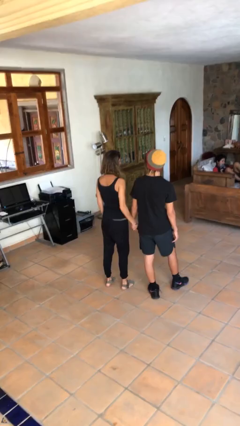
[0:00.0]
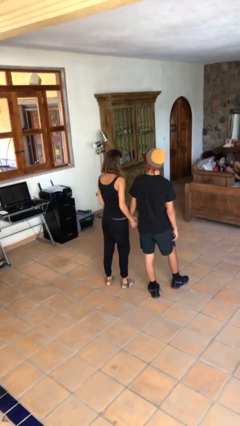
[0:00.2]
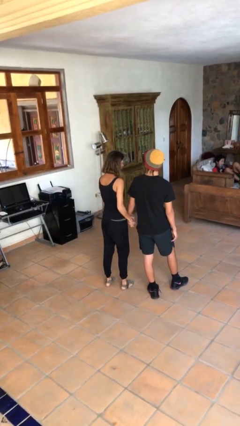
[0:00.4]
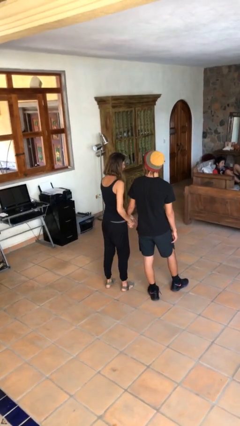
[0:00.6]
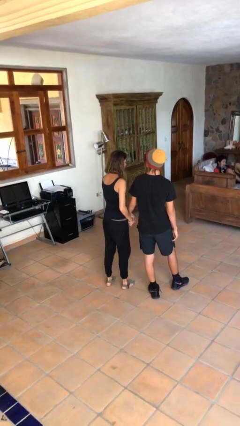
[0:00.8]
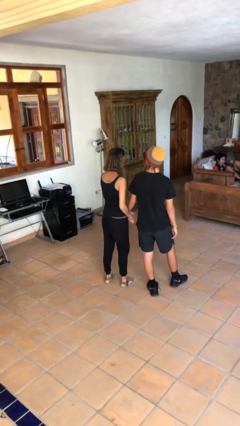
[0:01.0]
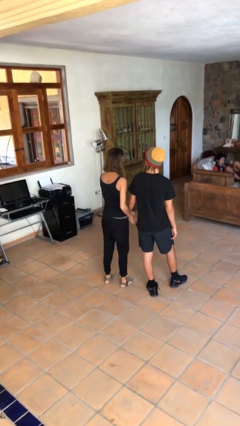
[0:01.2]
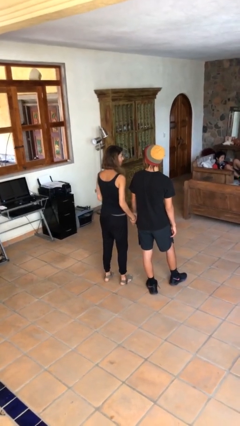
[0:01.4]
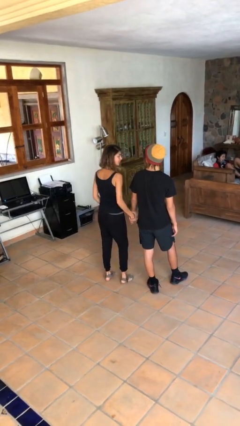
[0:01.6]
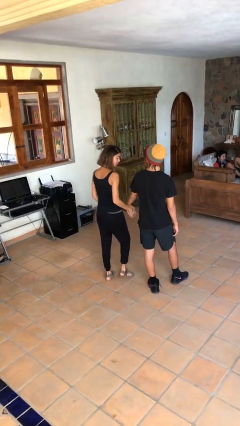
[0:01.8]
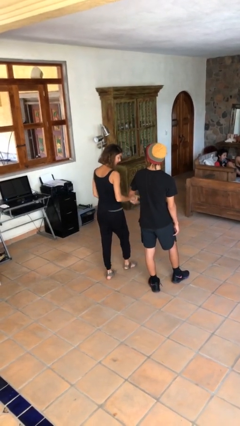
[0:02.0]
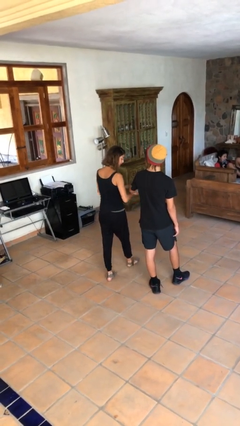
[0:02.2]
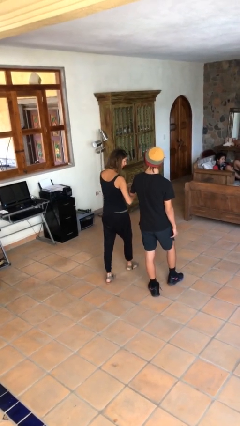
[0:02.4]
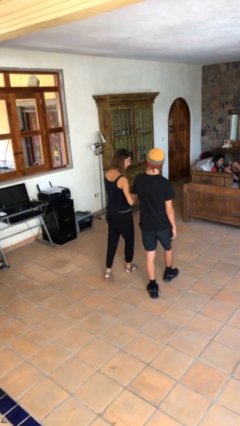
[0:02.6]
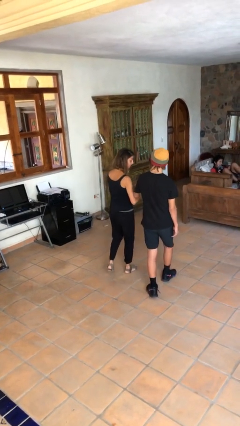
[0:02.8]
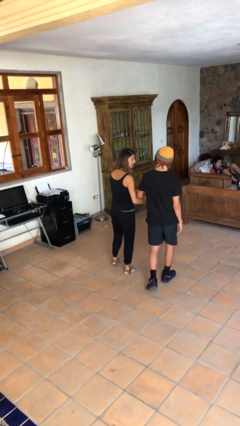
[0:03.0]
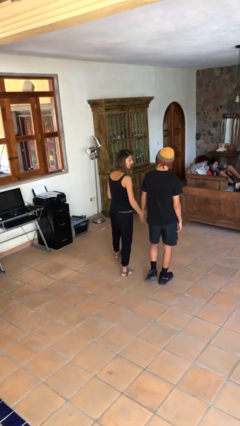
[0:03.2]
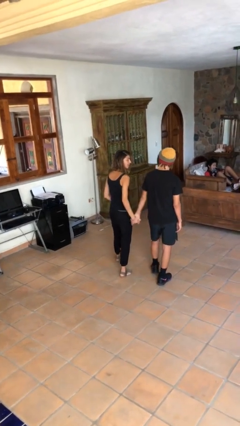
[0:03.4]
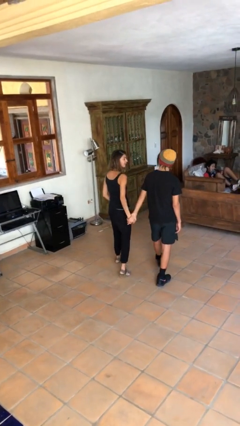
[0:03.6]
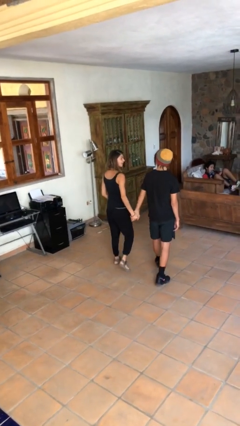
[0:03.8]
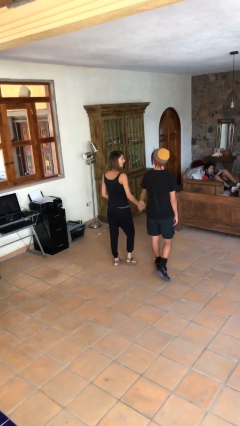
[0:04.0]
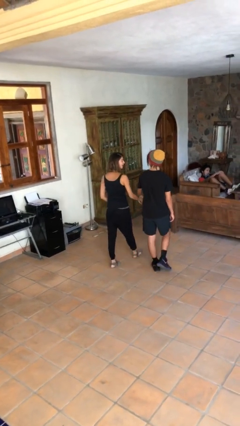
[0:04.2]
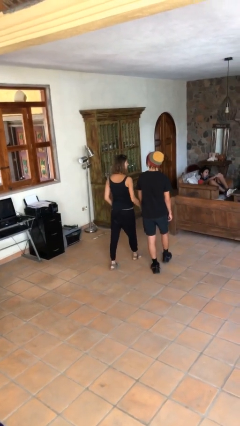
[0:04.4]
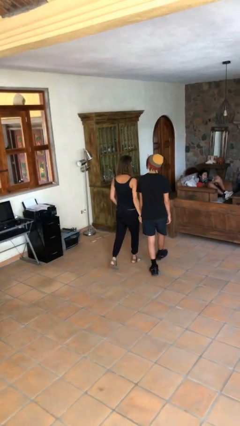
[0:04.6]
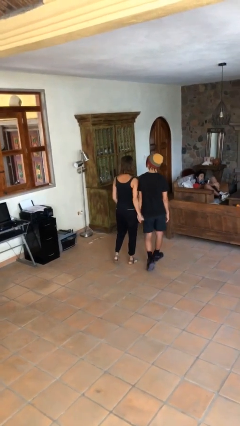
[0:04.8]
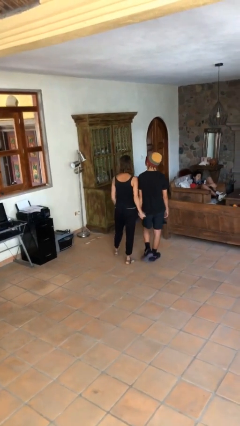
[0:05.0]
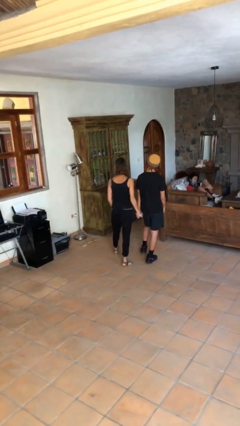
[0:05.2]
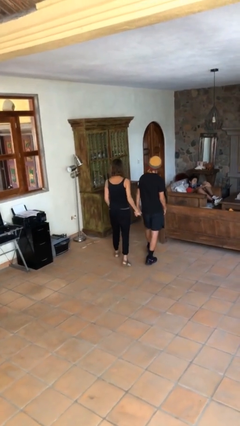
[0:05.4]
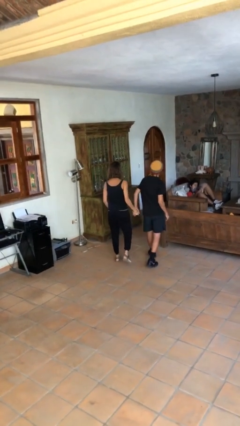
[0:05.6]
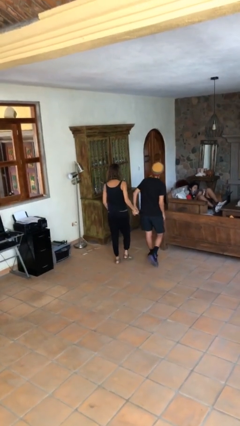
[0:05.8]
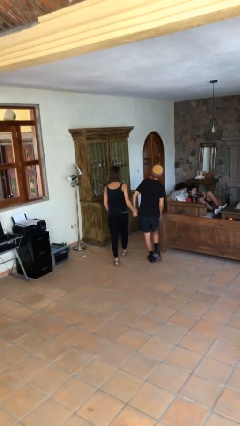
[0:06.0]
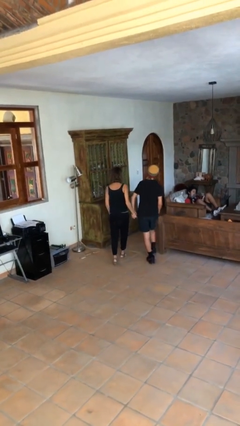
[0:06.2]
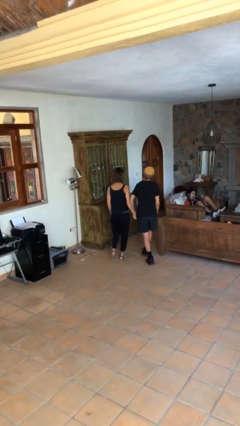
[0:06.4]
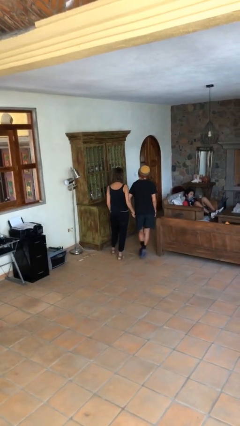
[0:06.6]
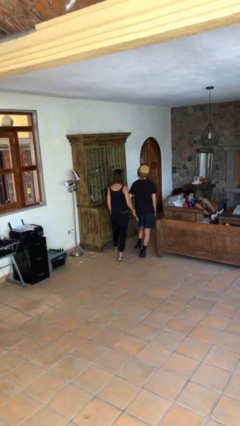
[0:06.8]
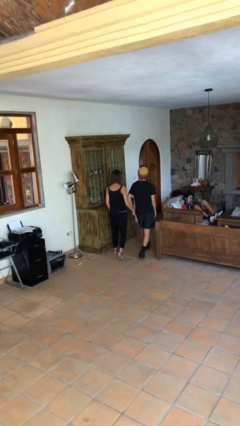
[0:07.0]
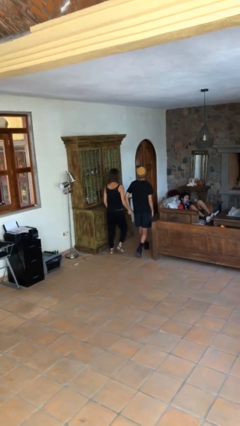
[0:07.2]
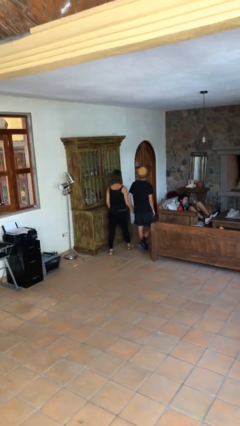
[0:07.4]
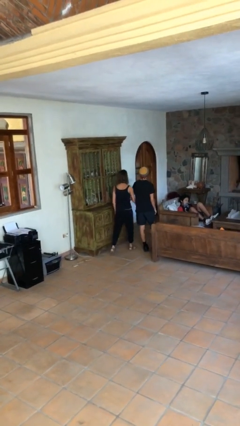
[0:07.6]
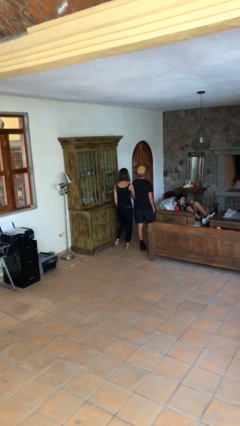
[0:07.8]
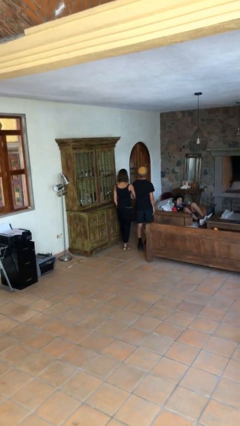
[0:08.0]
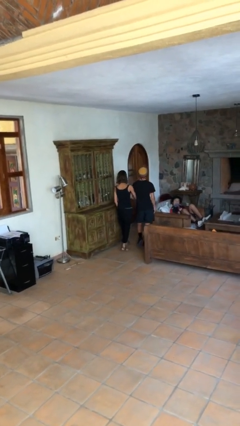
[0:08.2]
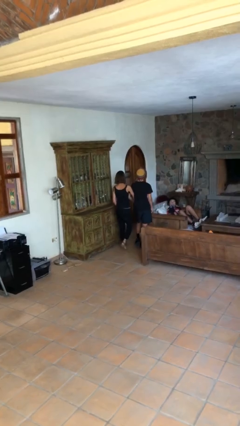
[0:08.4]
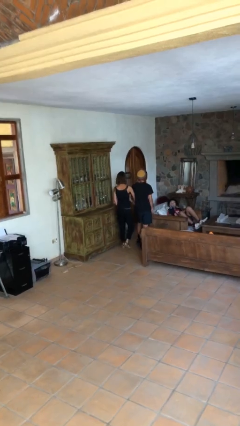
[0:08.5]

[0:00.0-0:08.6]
person holds hand

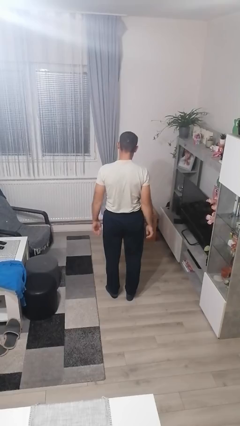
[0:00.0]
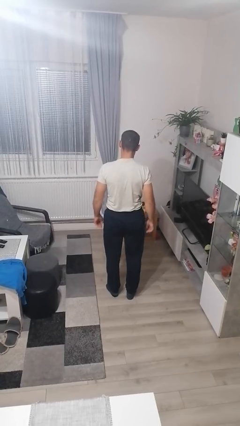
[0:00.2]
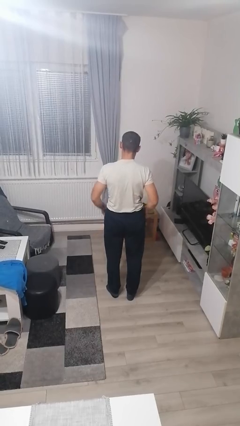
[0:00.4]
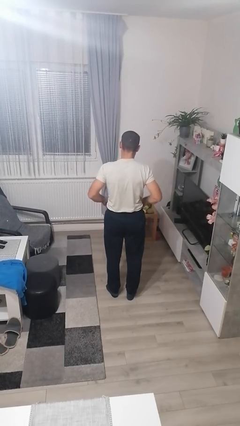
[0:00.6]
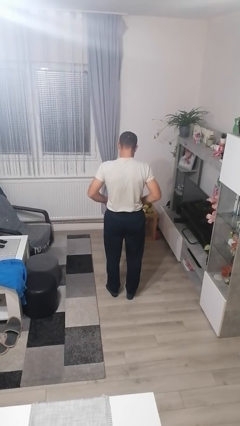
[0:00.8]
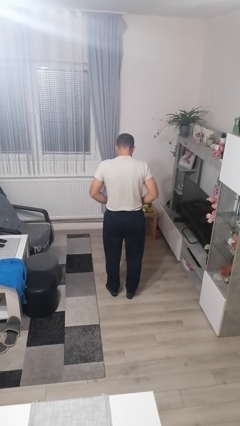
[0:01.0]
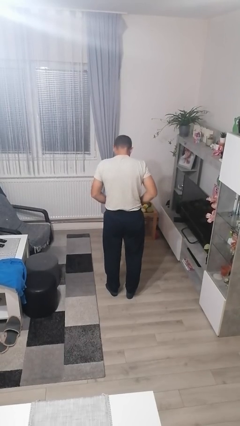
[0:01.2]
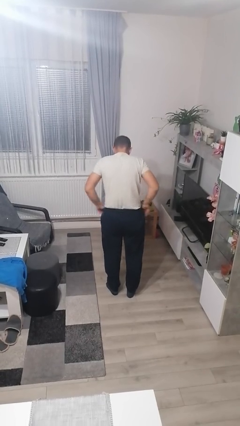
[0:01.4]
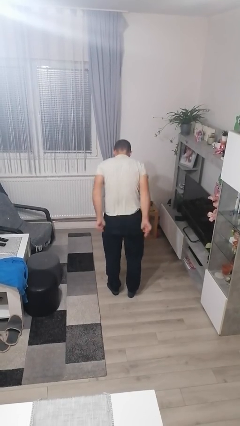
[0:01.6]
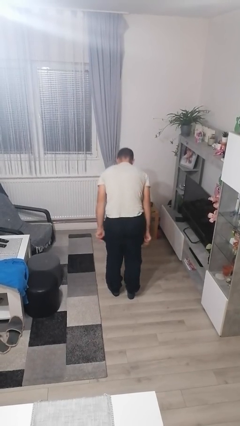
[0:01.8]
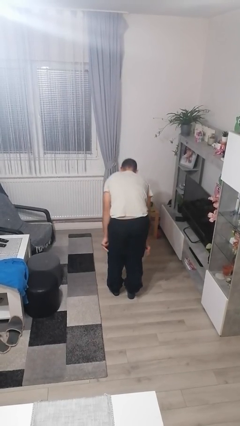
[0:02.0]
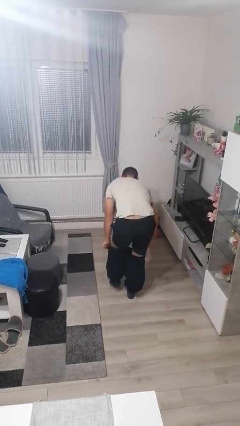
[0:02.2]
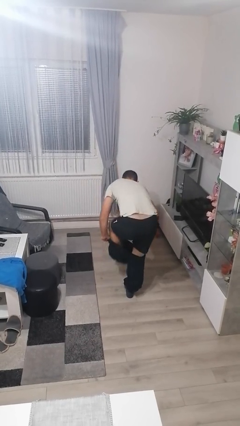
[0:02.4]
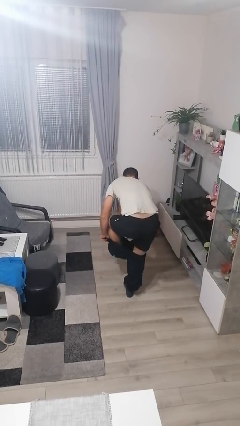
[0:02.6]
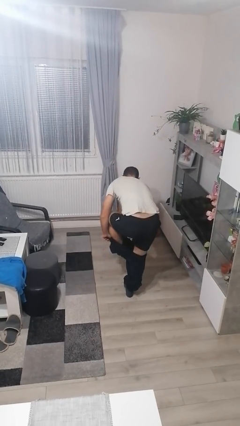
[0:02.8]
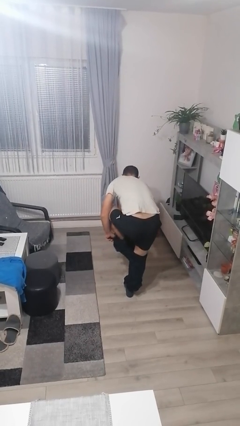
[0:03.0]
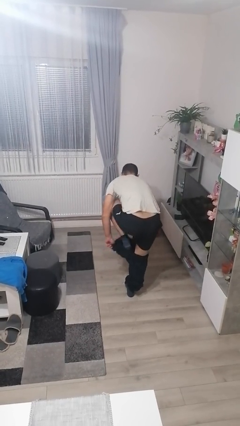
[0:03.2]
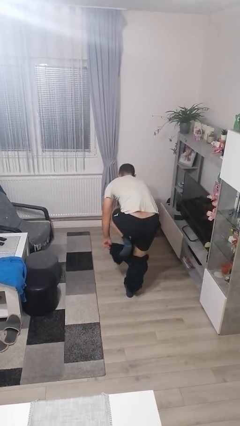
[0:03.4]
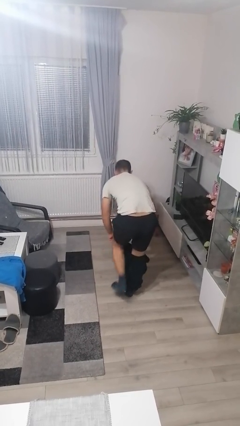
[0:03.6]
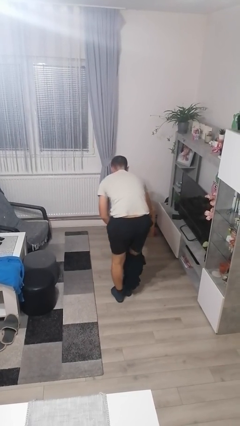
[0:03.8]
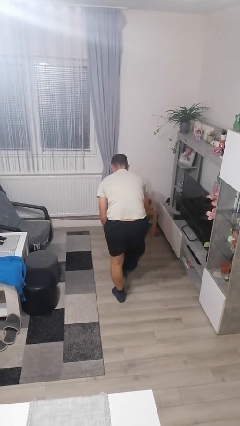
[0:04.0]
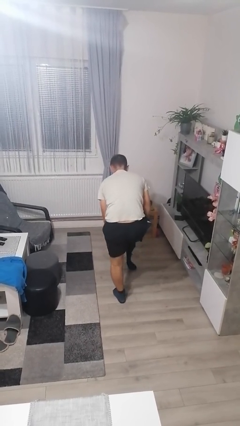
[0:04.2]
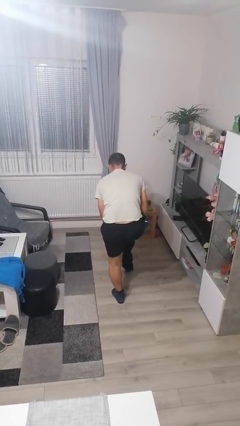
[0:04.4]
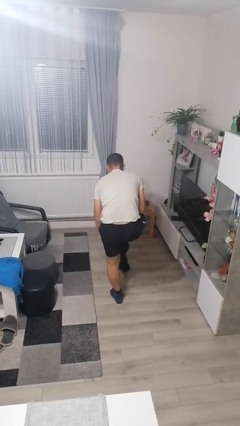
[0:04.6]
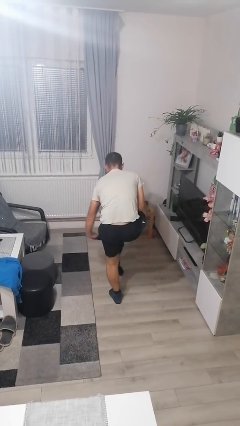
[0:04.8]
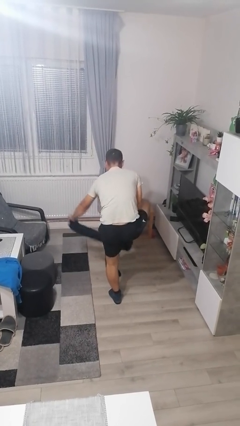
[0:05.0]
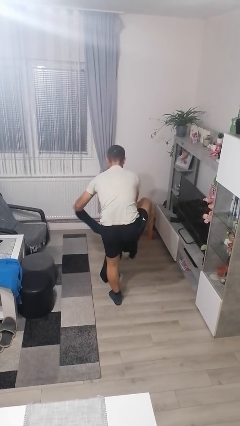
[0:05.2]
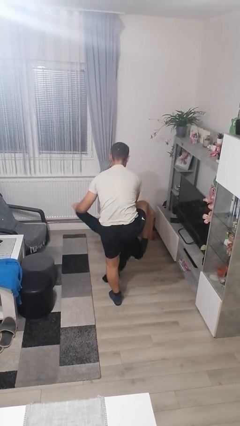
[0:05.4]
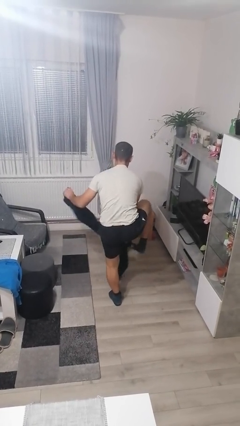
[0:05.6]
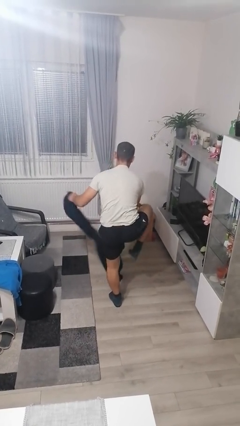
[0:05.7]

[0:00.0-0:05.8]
person takes off pants

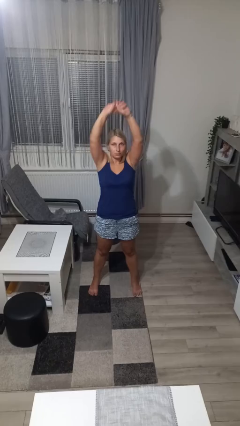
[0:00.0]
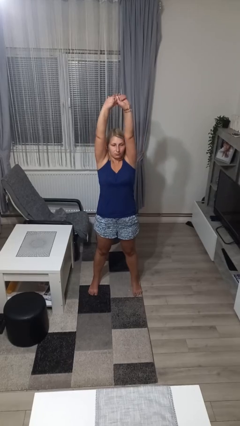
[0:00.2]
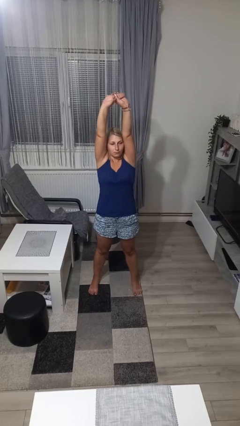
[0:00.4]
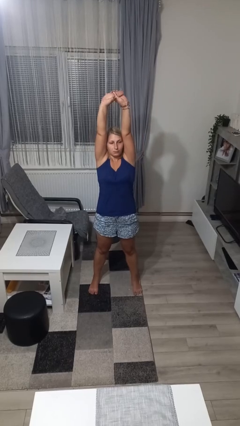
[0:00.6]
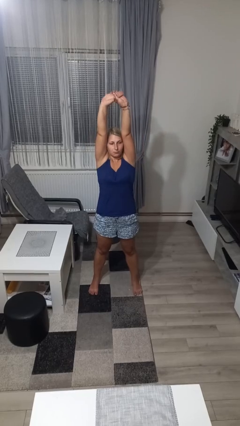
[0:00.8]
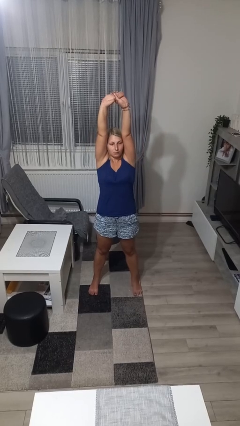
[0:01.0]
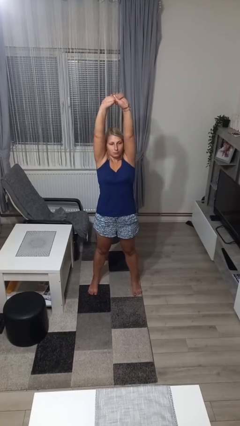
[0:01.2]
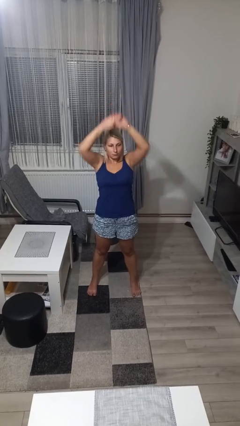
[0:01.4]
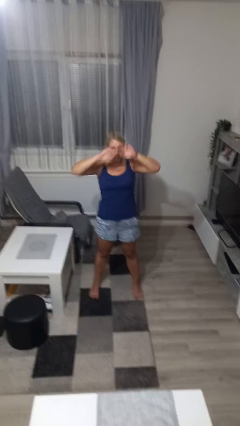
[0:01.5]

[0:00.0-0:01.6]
person stretches arms over head

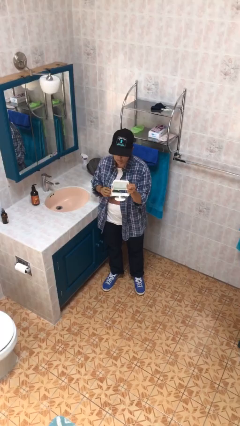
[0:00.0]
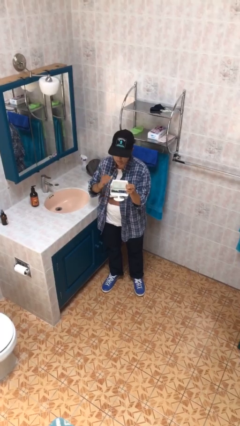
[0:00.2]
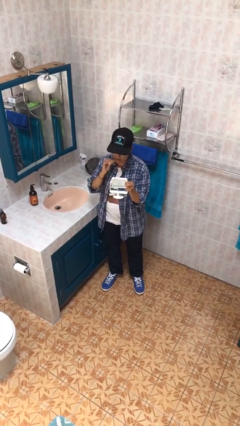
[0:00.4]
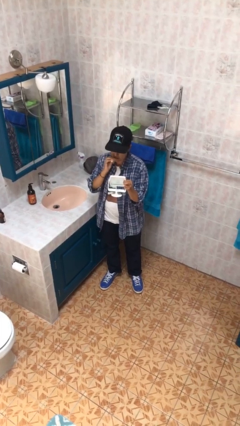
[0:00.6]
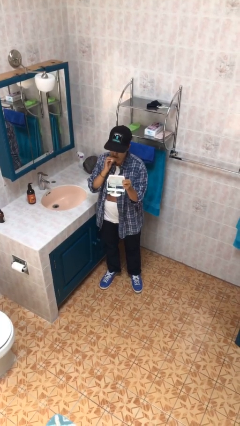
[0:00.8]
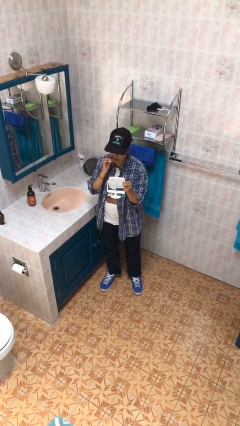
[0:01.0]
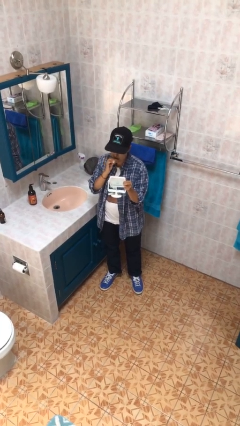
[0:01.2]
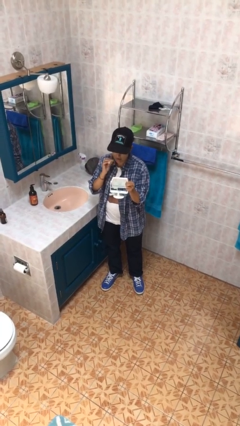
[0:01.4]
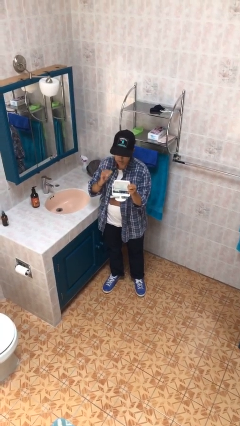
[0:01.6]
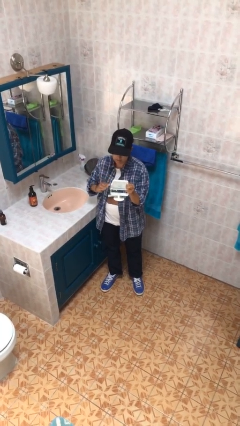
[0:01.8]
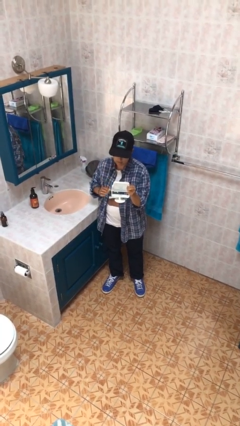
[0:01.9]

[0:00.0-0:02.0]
person applies lip makeup
